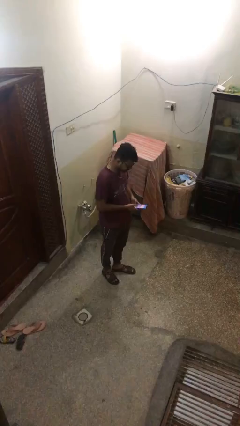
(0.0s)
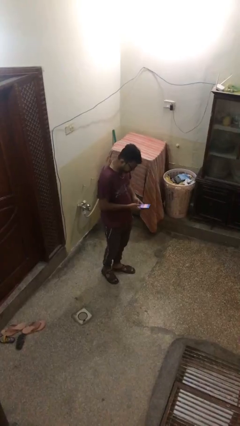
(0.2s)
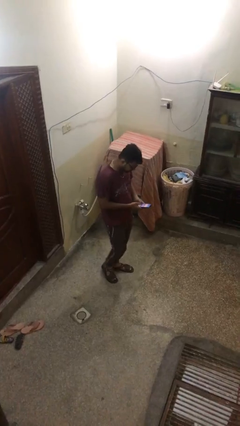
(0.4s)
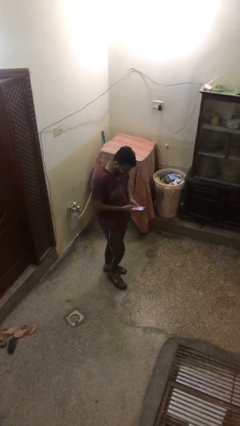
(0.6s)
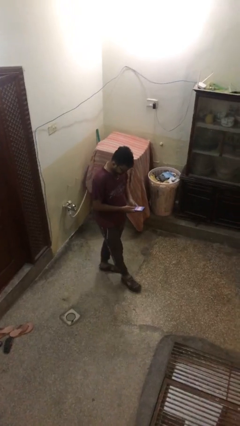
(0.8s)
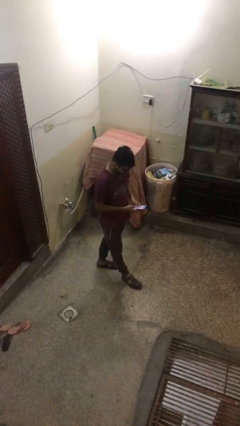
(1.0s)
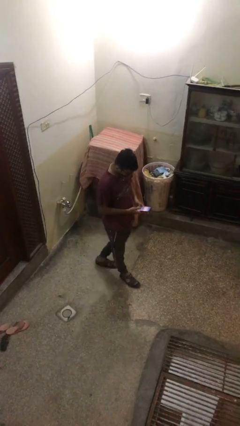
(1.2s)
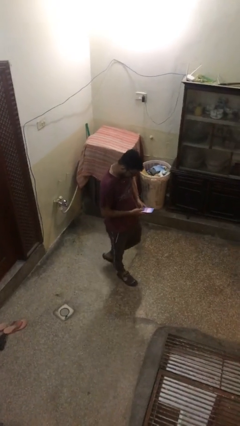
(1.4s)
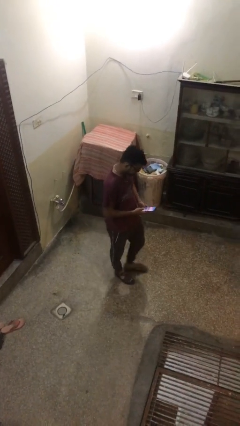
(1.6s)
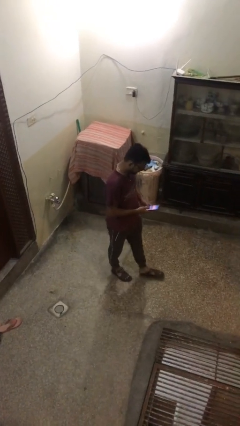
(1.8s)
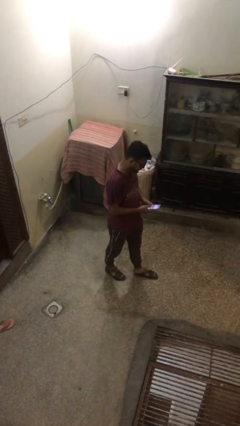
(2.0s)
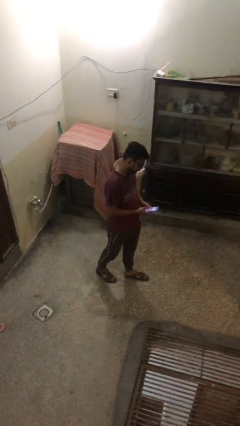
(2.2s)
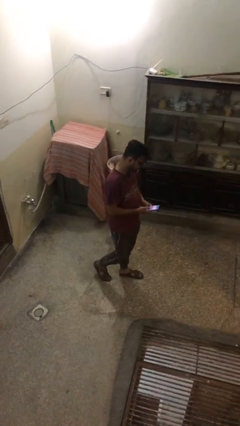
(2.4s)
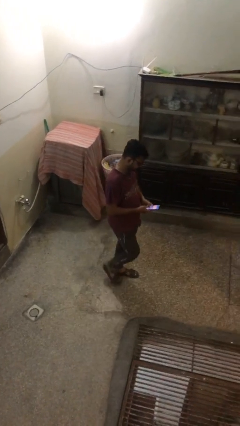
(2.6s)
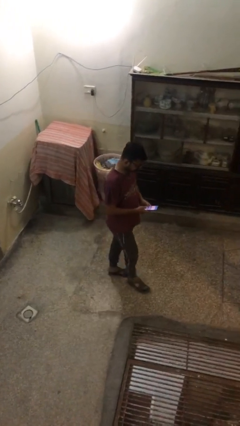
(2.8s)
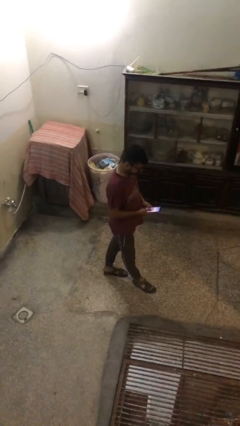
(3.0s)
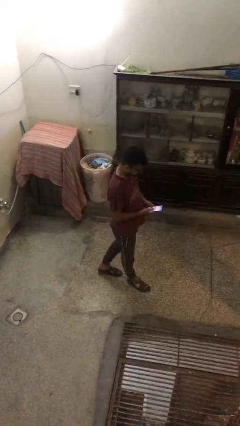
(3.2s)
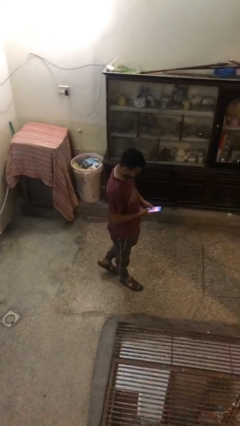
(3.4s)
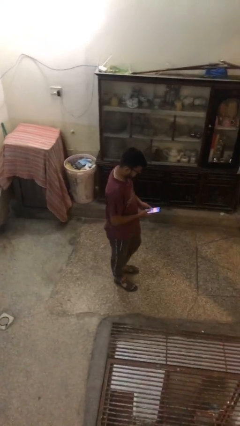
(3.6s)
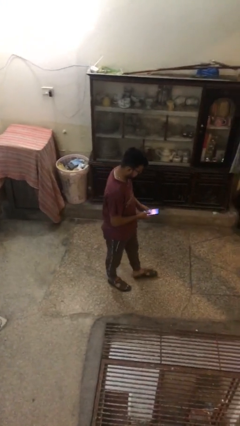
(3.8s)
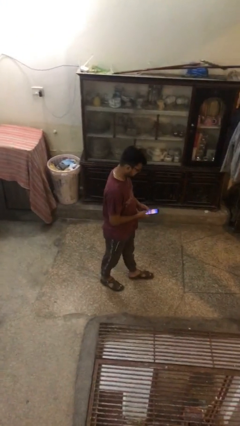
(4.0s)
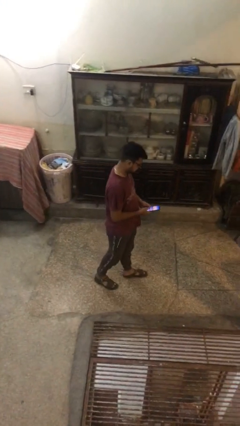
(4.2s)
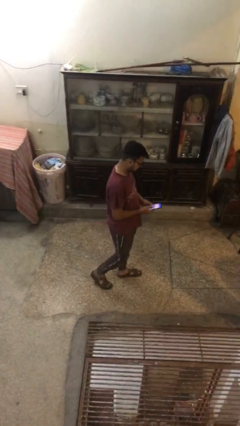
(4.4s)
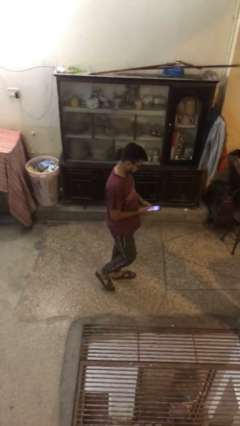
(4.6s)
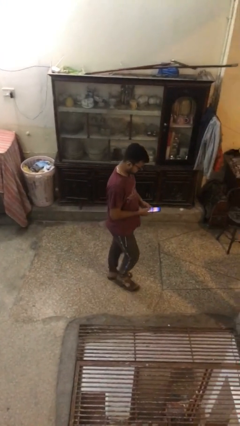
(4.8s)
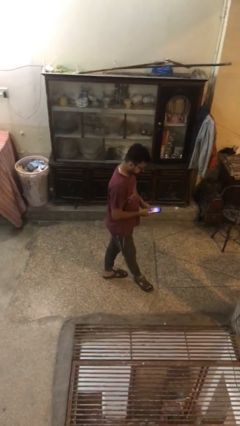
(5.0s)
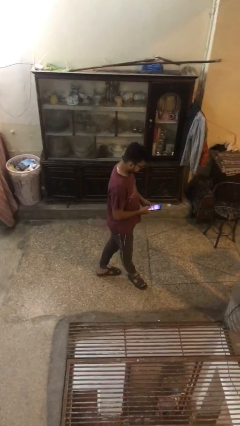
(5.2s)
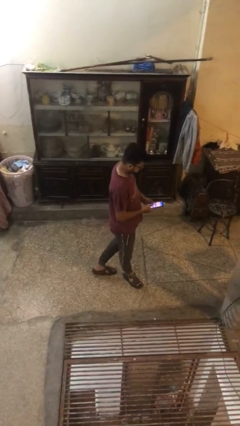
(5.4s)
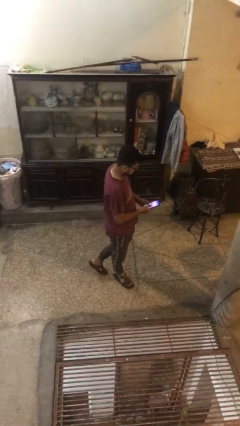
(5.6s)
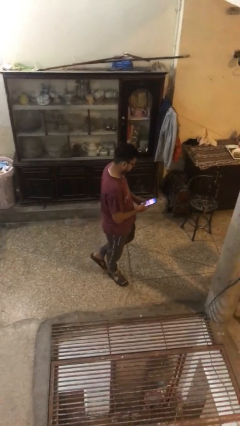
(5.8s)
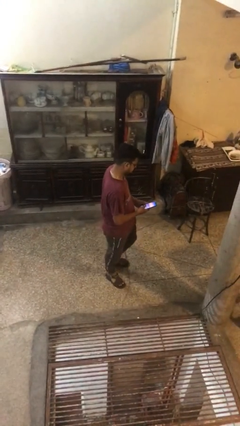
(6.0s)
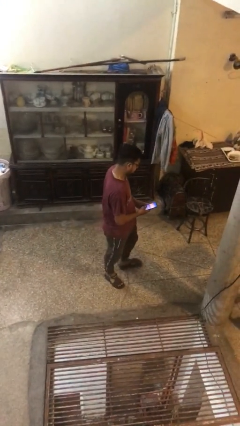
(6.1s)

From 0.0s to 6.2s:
person texts on phone

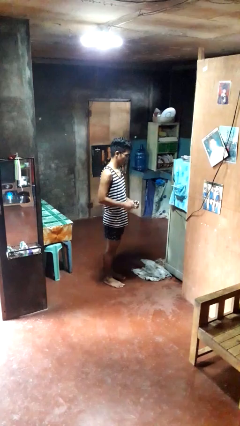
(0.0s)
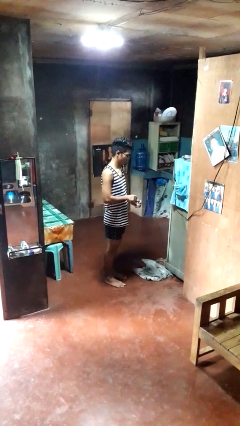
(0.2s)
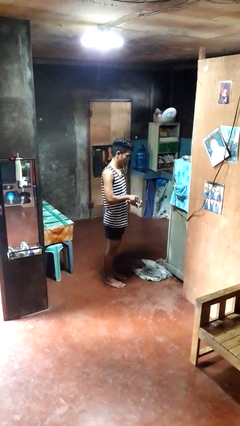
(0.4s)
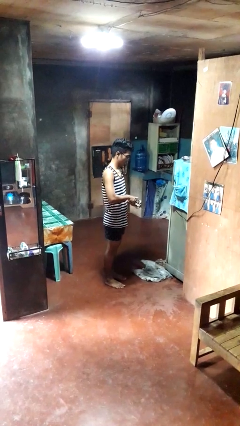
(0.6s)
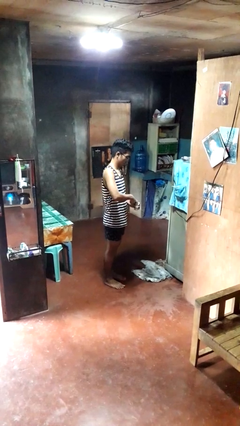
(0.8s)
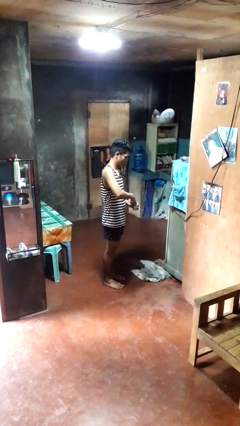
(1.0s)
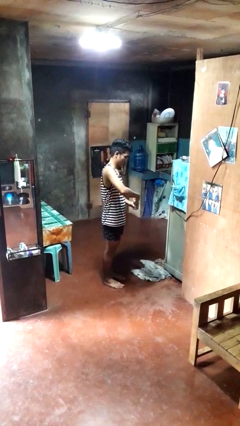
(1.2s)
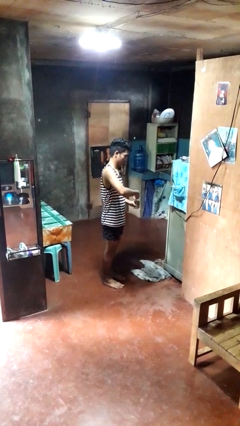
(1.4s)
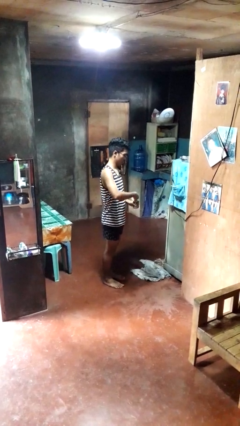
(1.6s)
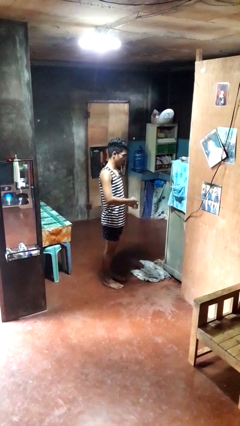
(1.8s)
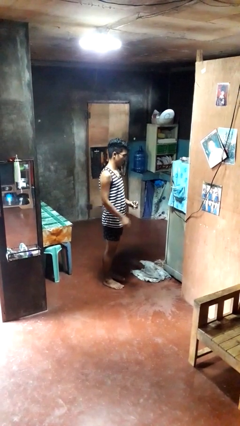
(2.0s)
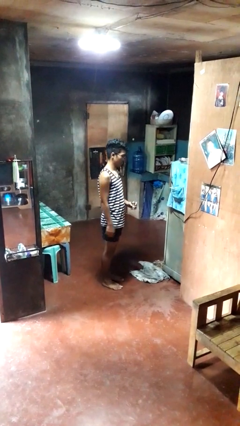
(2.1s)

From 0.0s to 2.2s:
person opens beverage can

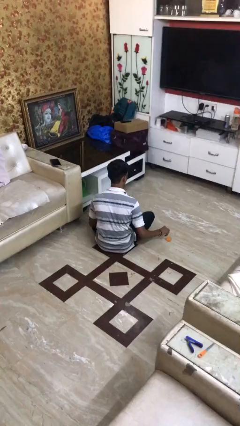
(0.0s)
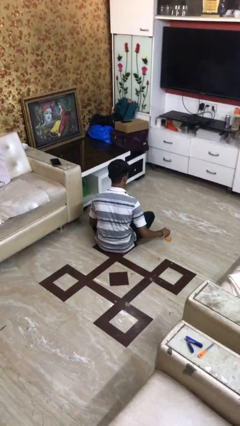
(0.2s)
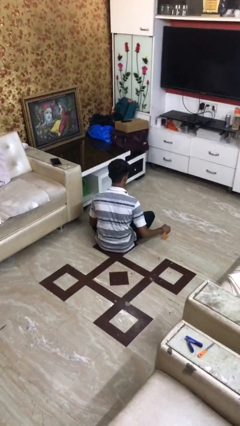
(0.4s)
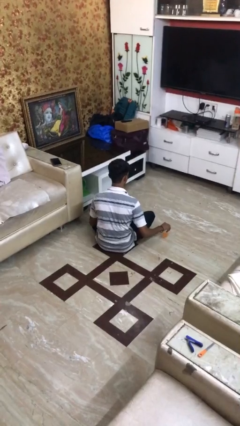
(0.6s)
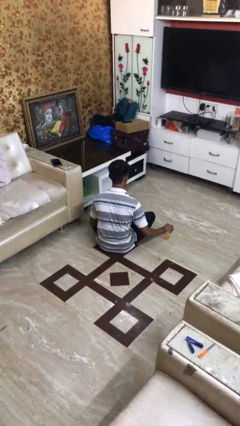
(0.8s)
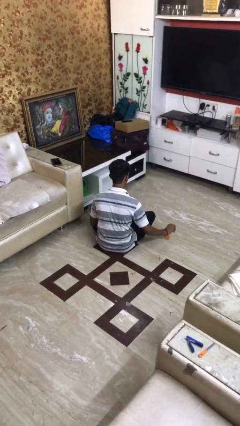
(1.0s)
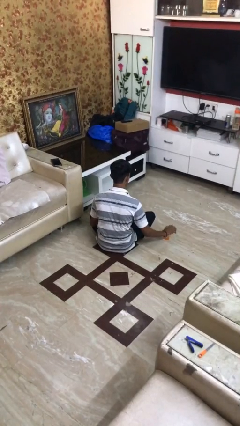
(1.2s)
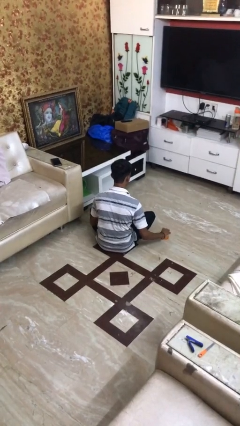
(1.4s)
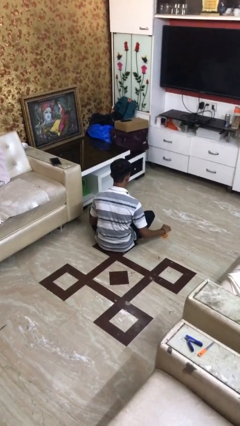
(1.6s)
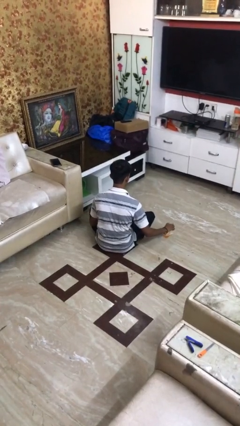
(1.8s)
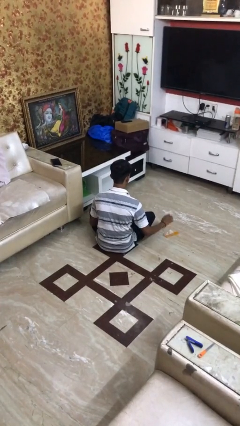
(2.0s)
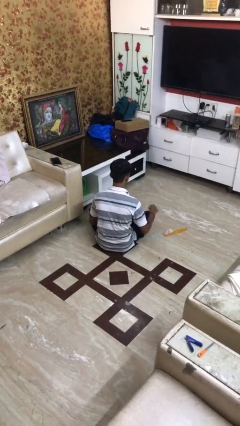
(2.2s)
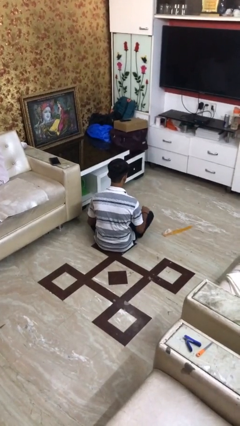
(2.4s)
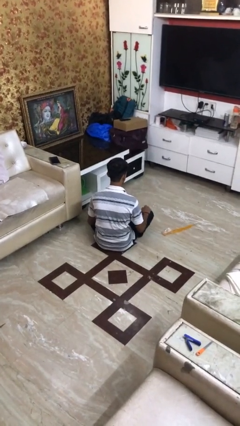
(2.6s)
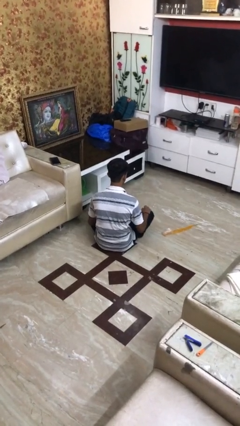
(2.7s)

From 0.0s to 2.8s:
person spills on floor

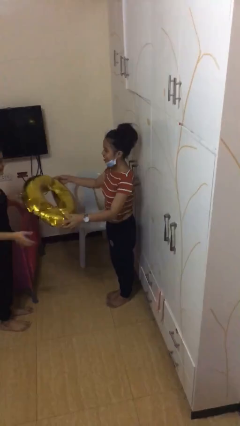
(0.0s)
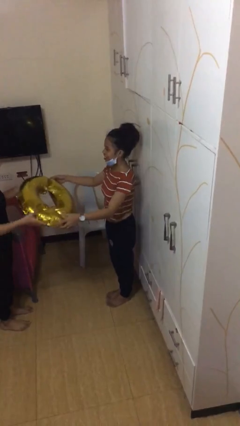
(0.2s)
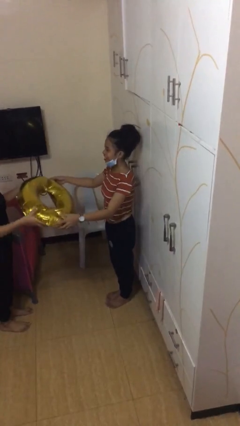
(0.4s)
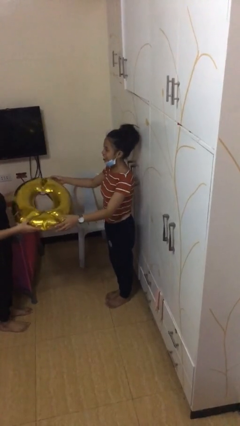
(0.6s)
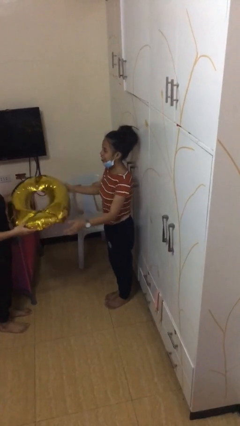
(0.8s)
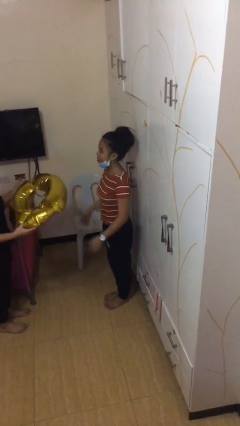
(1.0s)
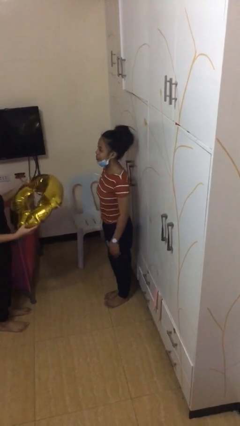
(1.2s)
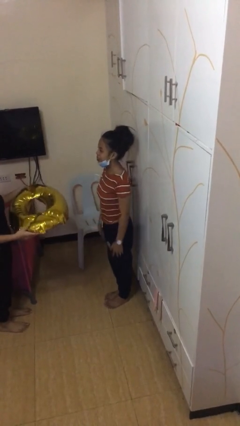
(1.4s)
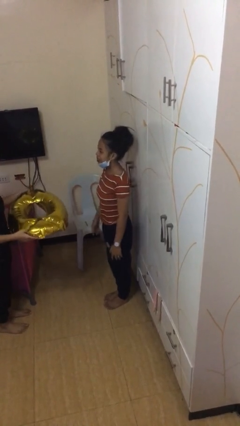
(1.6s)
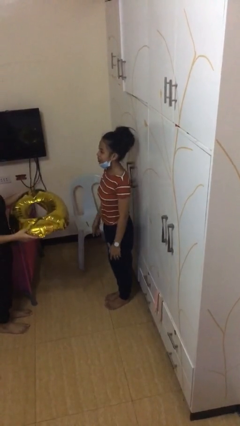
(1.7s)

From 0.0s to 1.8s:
person transfers object to person

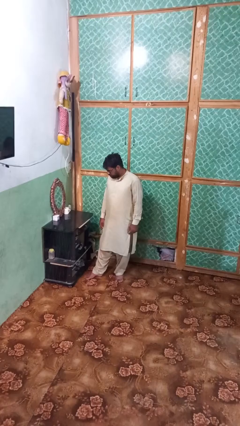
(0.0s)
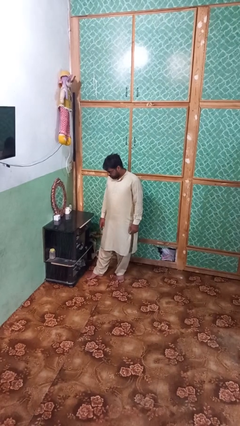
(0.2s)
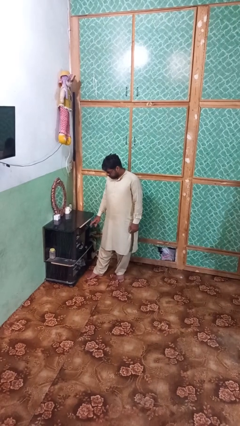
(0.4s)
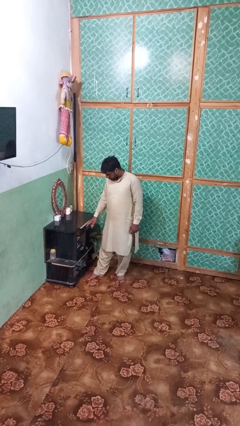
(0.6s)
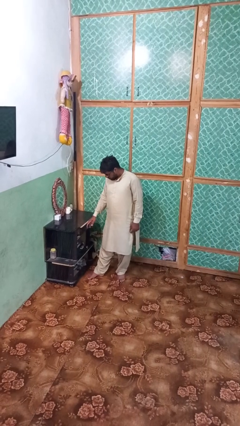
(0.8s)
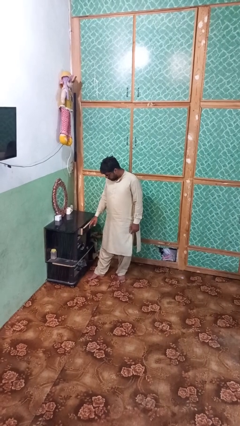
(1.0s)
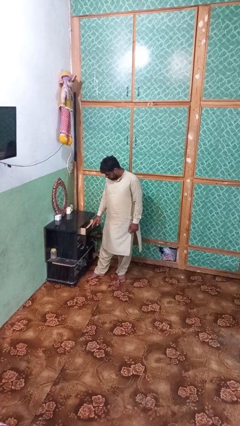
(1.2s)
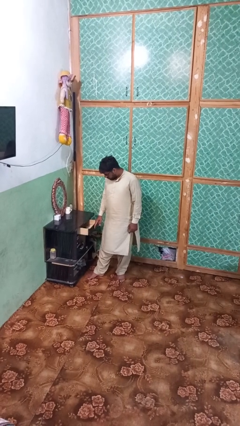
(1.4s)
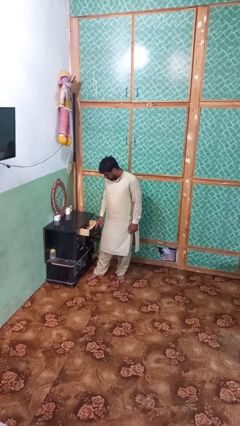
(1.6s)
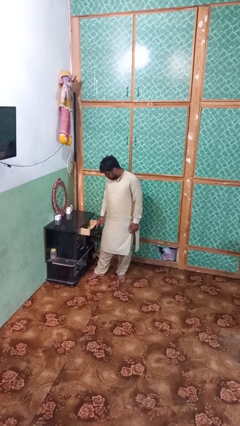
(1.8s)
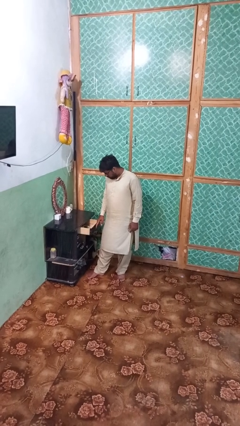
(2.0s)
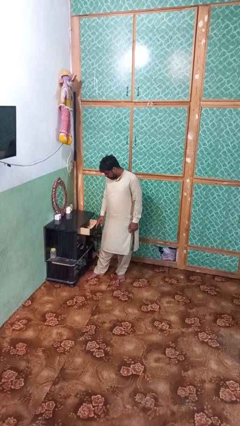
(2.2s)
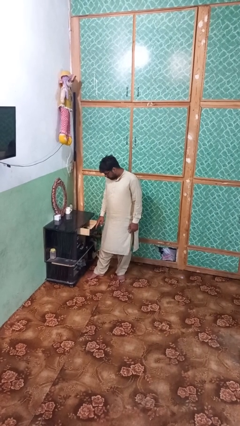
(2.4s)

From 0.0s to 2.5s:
person opens dresser drawer

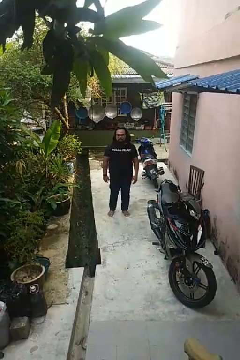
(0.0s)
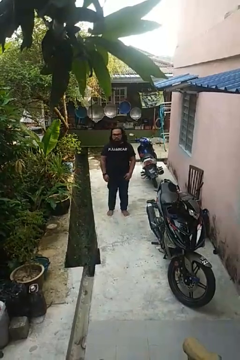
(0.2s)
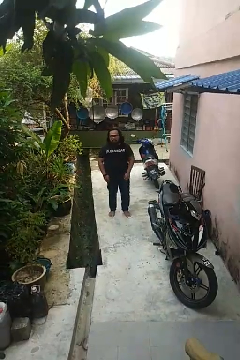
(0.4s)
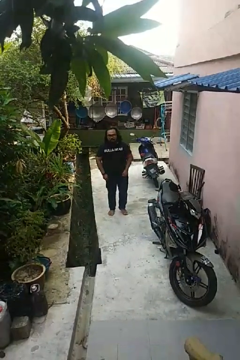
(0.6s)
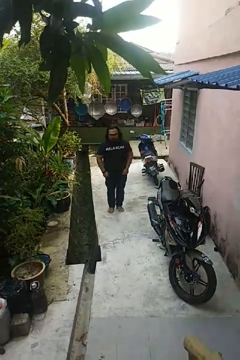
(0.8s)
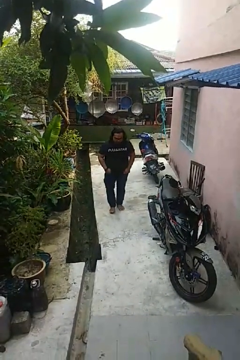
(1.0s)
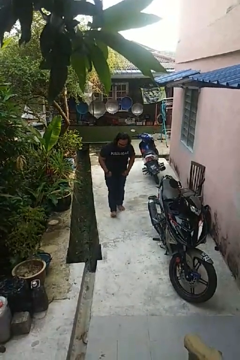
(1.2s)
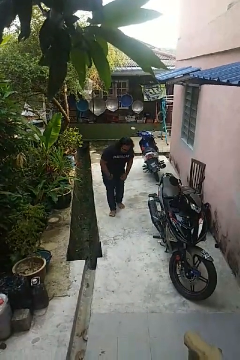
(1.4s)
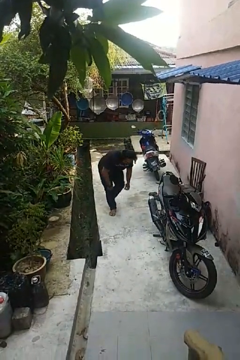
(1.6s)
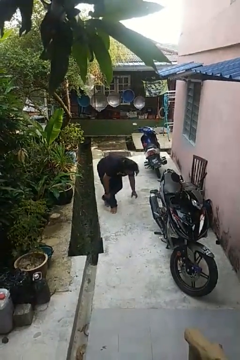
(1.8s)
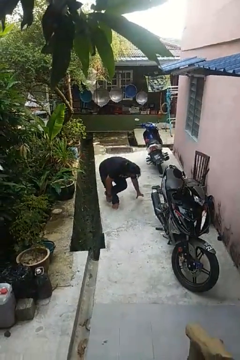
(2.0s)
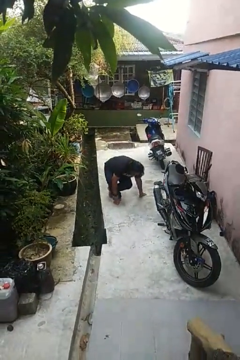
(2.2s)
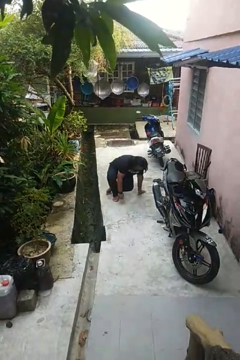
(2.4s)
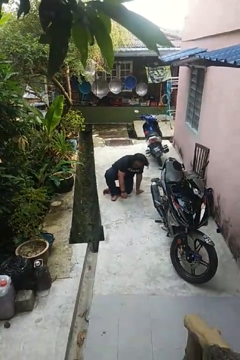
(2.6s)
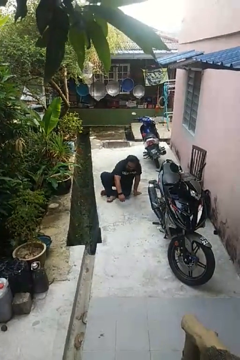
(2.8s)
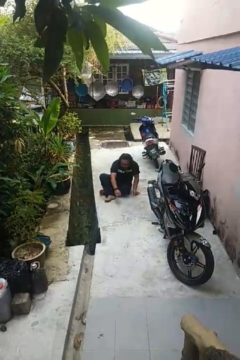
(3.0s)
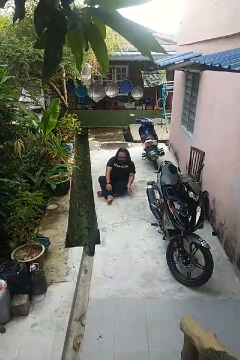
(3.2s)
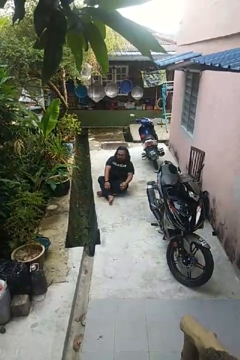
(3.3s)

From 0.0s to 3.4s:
person sits crisscross
